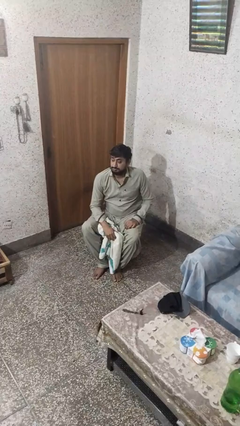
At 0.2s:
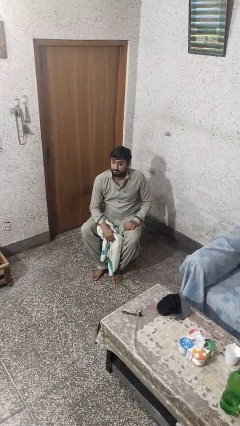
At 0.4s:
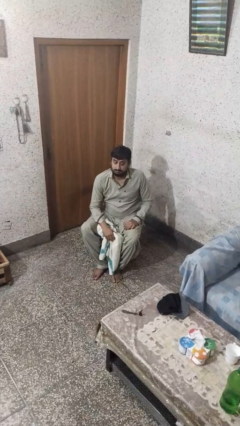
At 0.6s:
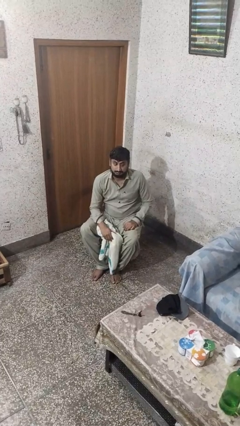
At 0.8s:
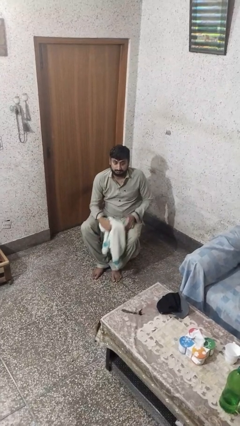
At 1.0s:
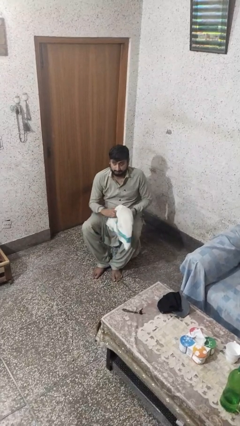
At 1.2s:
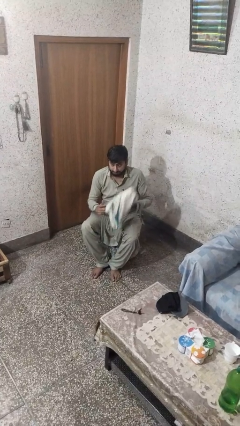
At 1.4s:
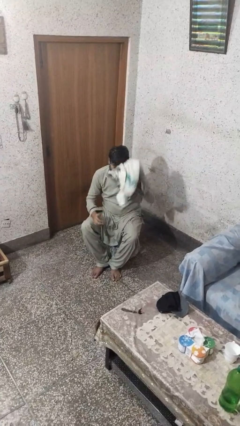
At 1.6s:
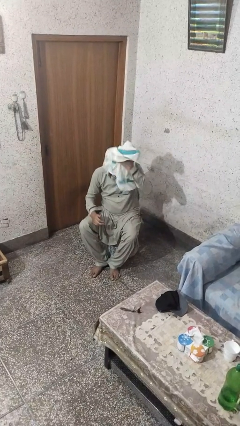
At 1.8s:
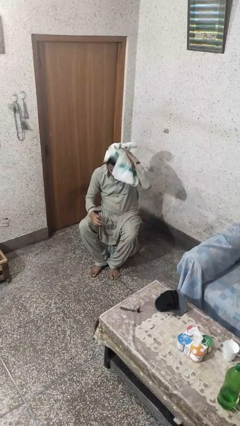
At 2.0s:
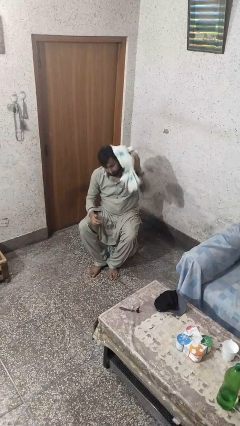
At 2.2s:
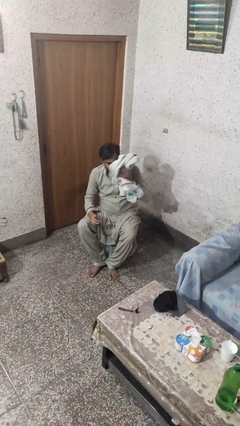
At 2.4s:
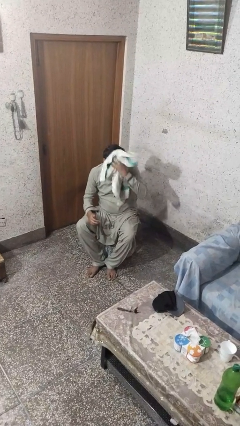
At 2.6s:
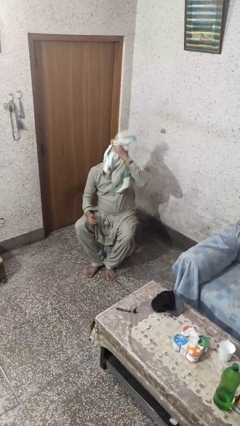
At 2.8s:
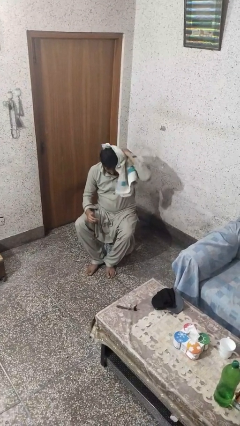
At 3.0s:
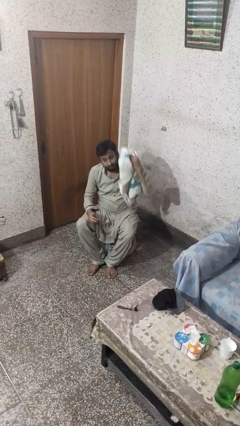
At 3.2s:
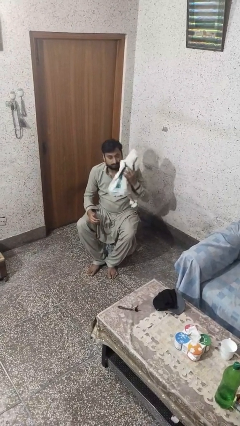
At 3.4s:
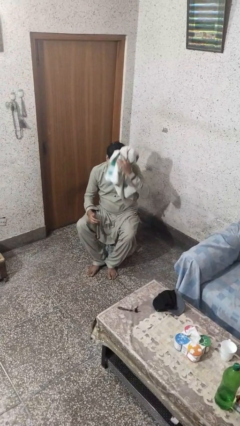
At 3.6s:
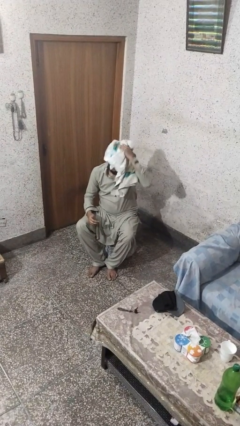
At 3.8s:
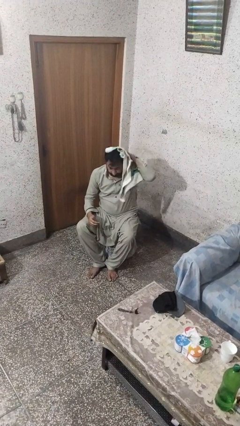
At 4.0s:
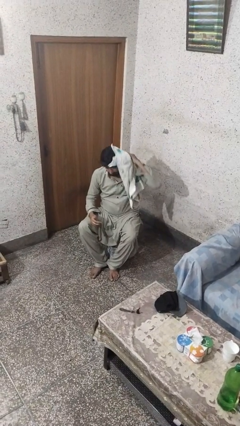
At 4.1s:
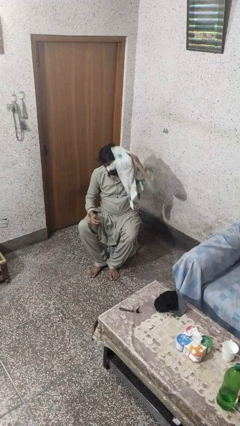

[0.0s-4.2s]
person dries hair with towel

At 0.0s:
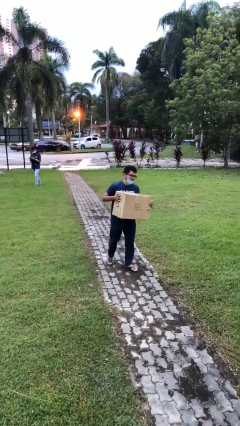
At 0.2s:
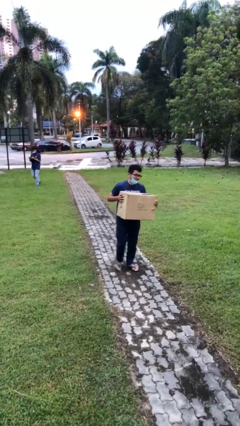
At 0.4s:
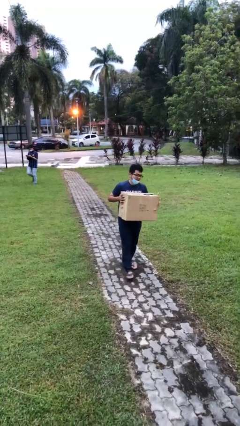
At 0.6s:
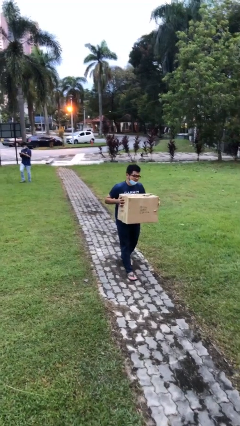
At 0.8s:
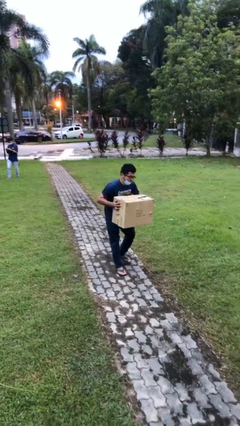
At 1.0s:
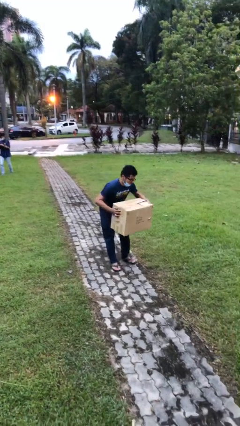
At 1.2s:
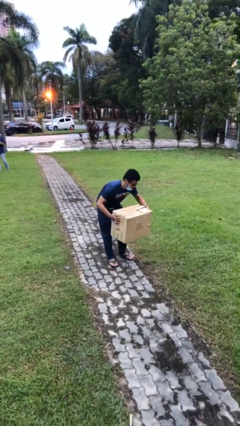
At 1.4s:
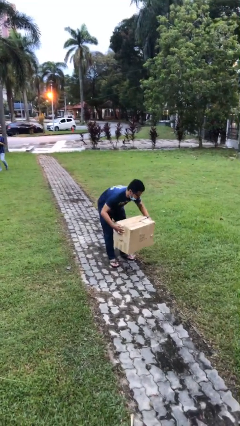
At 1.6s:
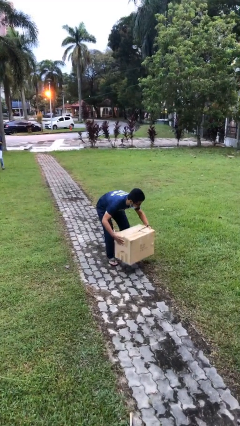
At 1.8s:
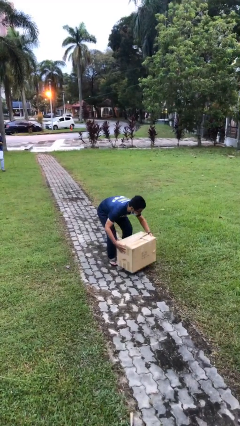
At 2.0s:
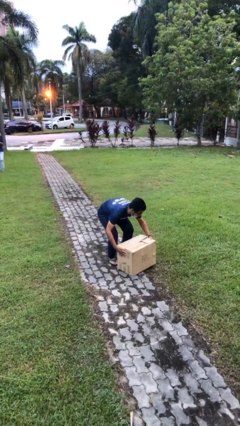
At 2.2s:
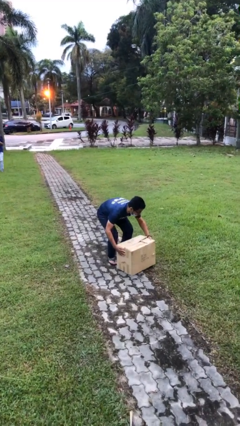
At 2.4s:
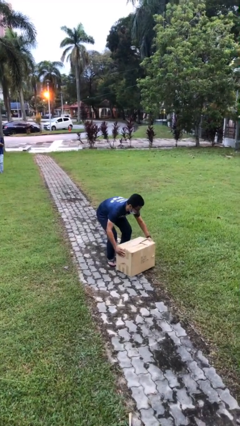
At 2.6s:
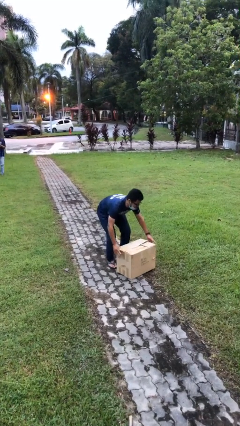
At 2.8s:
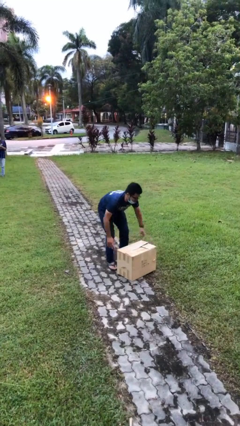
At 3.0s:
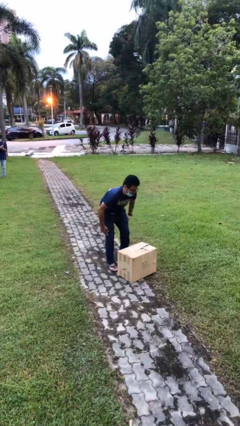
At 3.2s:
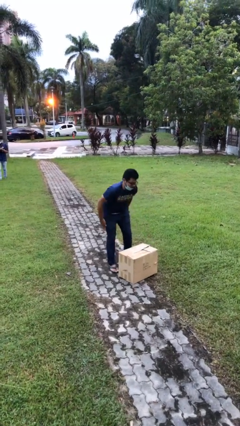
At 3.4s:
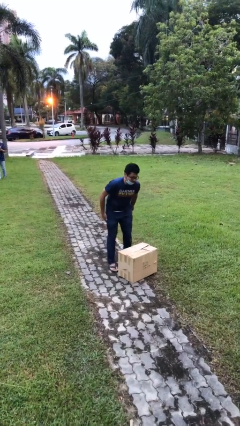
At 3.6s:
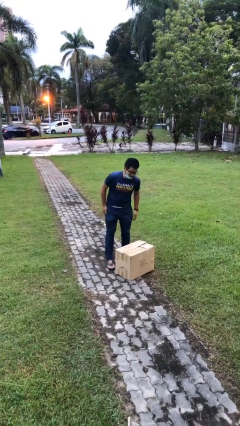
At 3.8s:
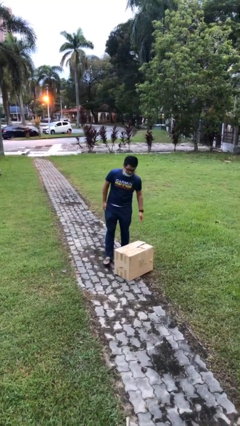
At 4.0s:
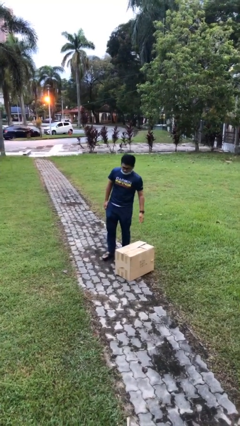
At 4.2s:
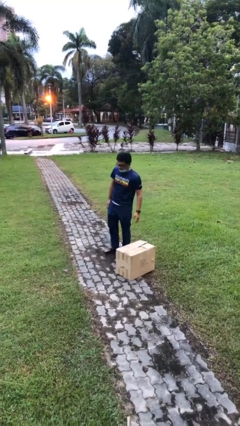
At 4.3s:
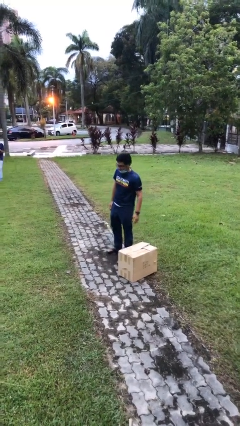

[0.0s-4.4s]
person puts down object on floor

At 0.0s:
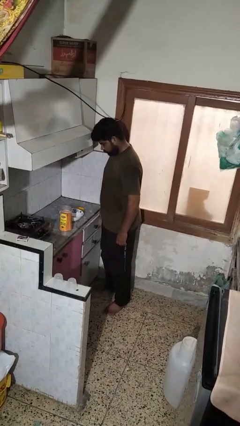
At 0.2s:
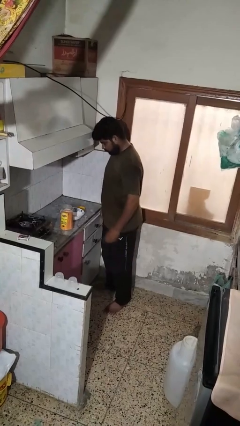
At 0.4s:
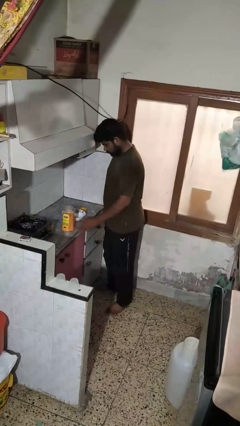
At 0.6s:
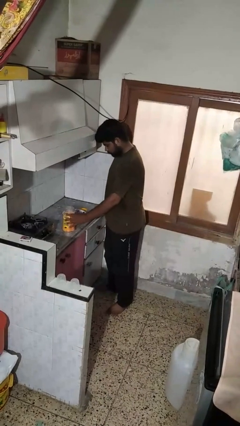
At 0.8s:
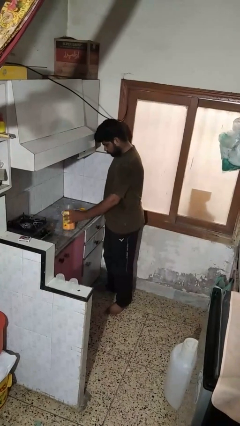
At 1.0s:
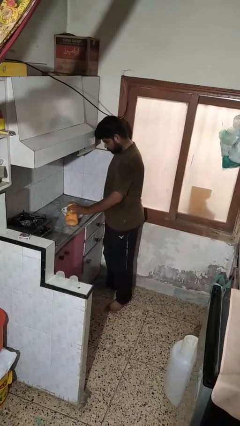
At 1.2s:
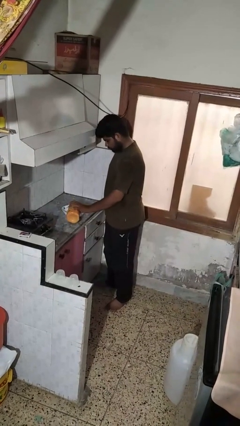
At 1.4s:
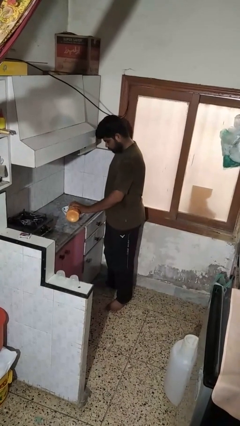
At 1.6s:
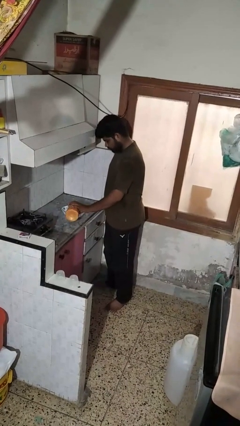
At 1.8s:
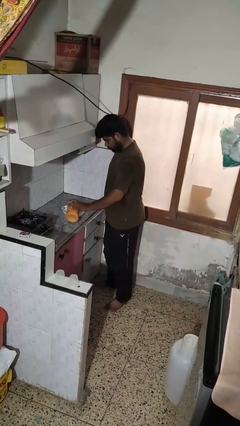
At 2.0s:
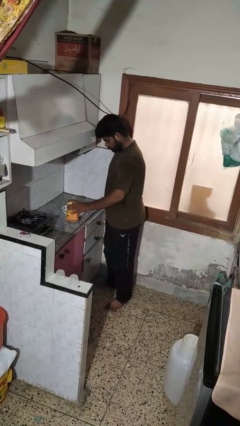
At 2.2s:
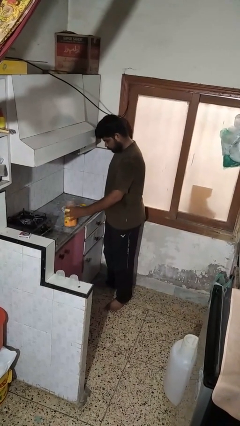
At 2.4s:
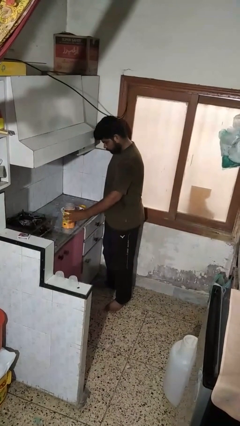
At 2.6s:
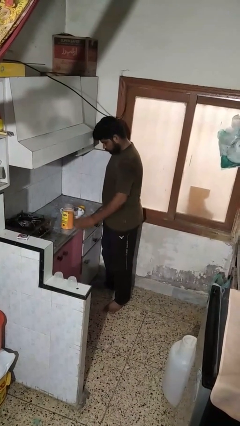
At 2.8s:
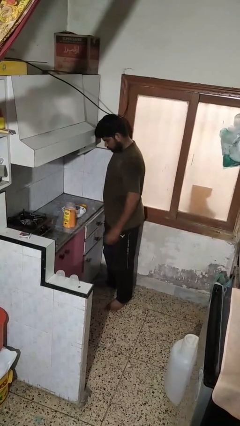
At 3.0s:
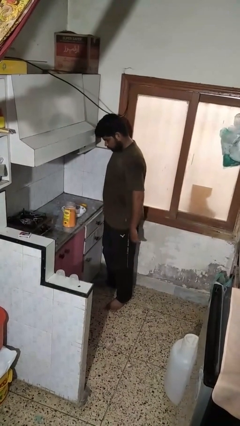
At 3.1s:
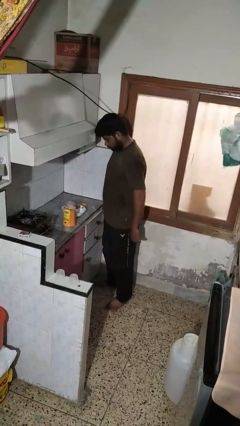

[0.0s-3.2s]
person pours into bowl

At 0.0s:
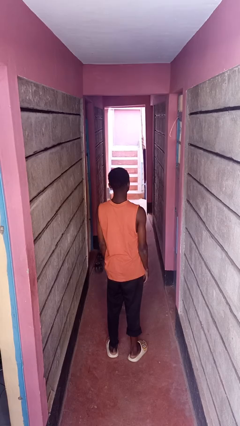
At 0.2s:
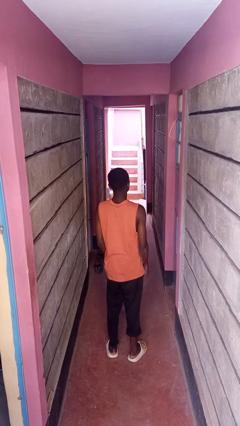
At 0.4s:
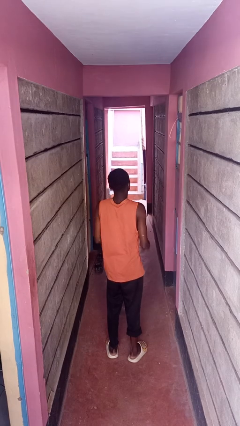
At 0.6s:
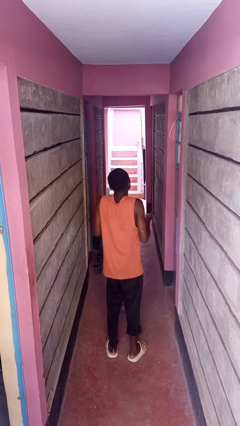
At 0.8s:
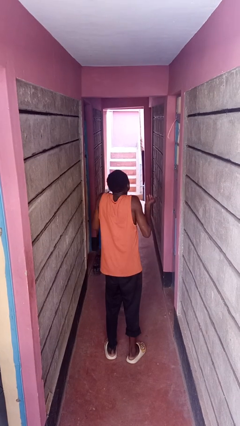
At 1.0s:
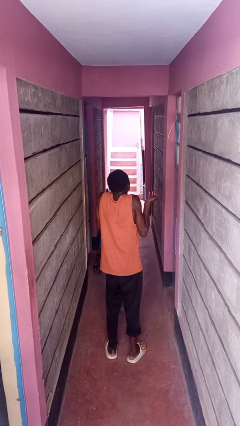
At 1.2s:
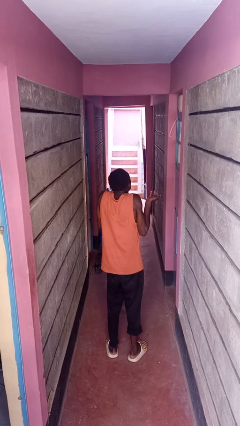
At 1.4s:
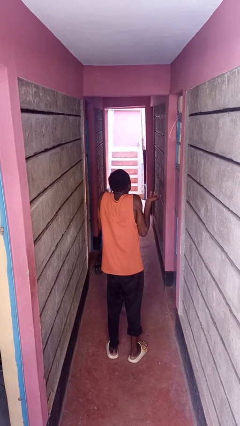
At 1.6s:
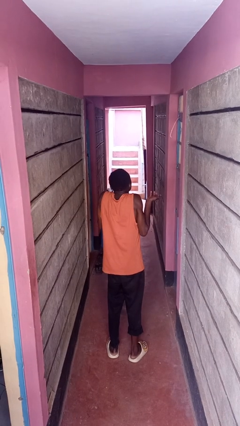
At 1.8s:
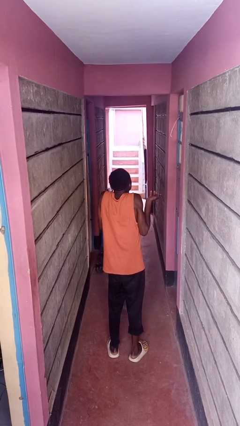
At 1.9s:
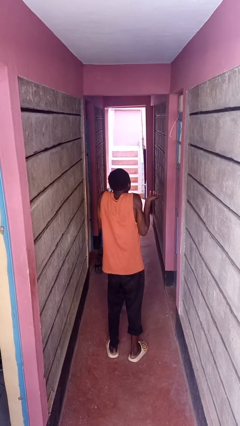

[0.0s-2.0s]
person shrugs

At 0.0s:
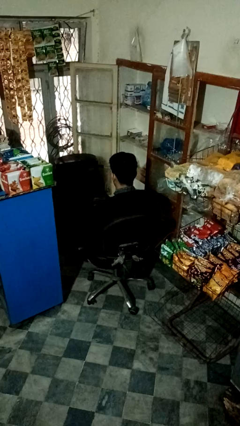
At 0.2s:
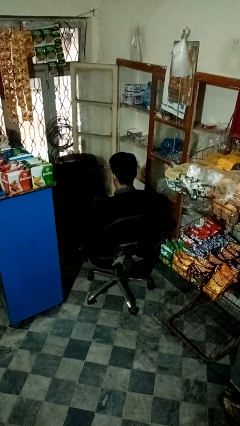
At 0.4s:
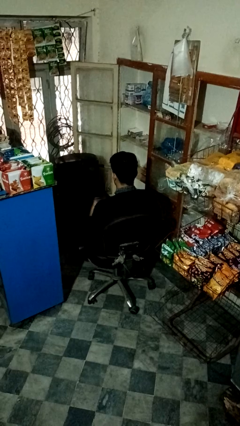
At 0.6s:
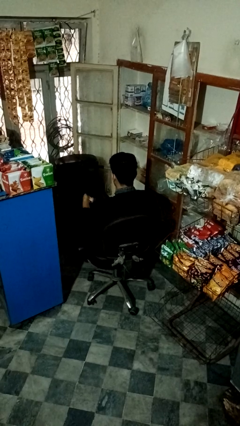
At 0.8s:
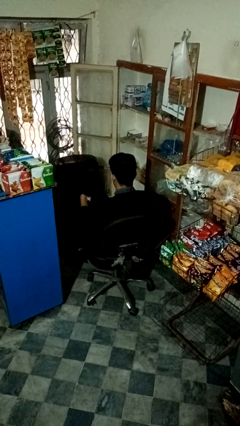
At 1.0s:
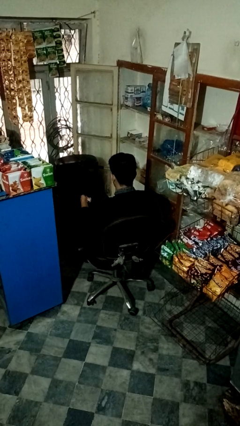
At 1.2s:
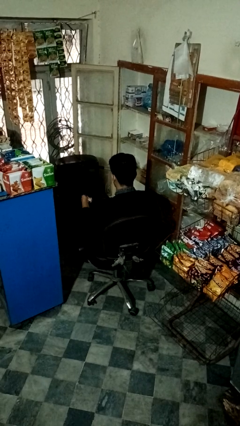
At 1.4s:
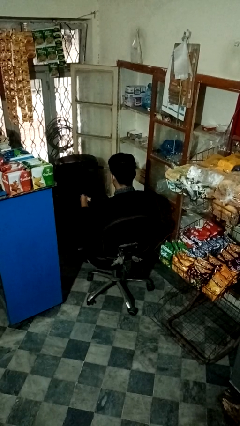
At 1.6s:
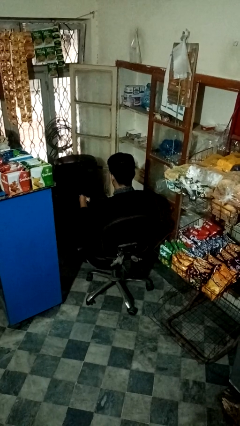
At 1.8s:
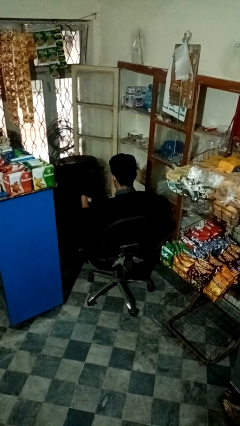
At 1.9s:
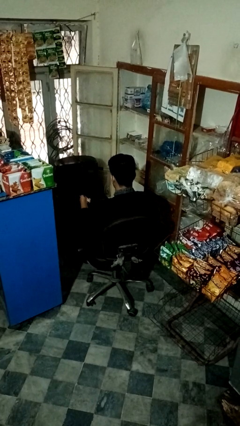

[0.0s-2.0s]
person uses television remote

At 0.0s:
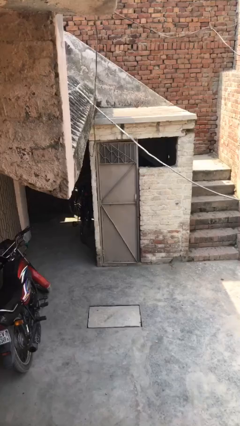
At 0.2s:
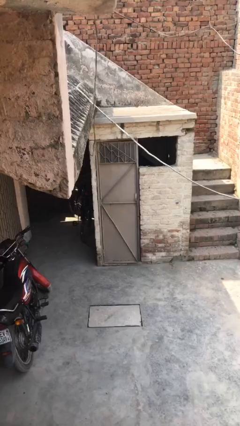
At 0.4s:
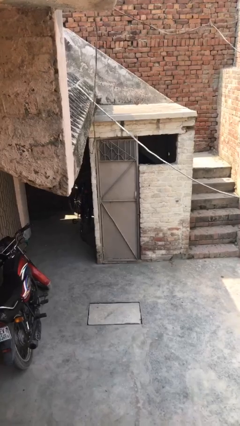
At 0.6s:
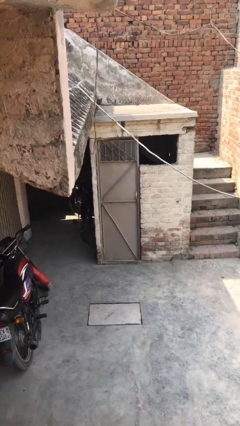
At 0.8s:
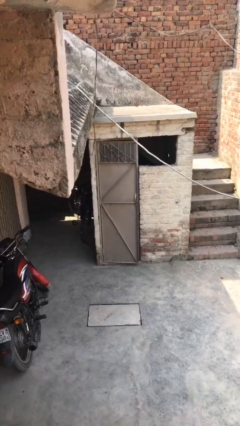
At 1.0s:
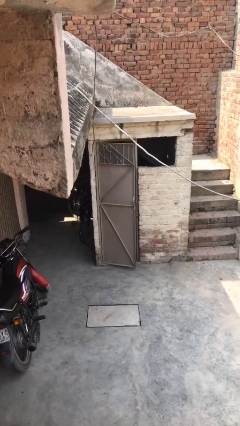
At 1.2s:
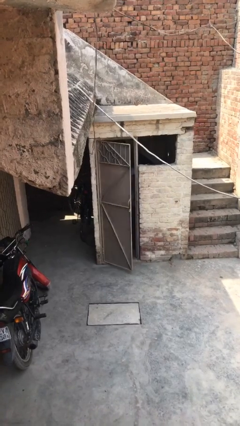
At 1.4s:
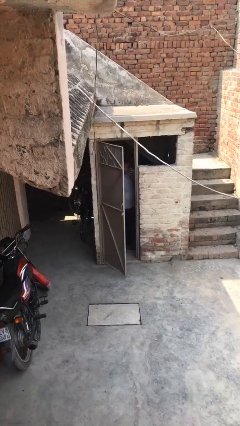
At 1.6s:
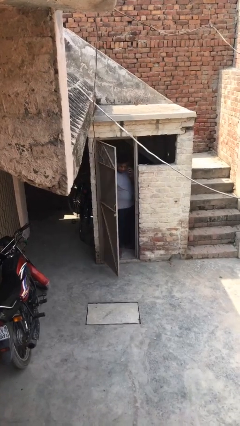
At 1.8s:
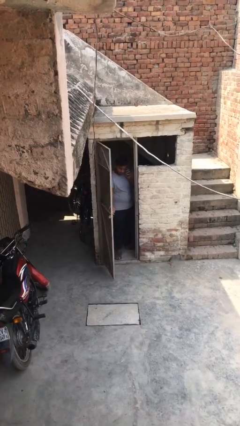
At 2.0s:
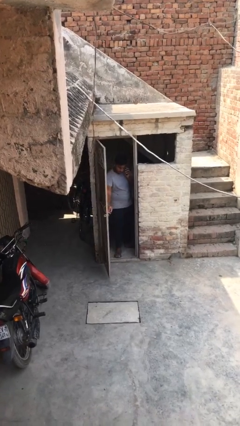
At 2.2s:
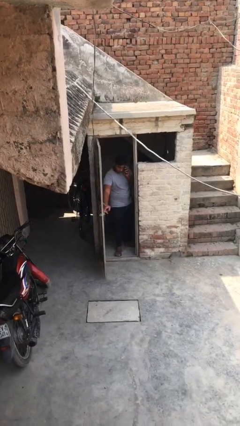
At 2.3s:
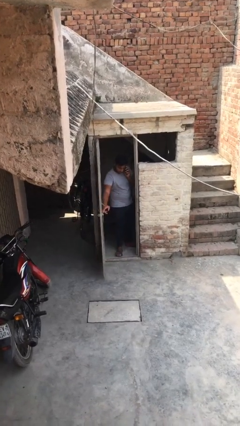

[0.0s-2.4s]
person opens facility door
